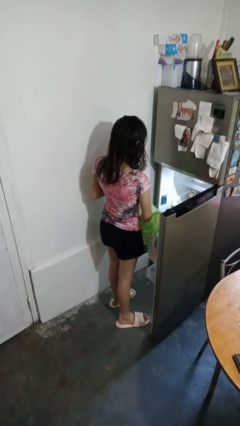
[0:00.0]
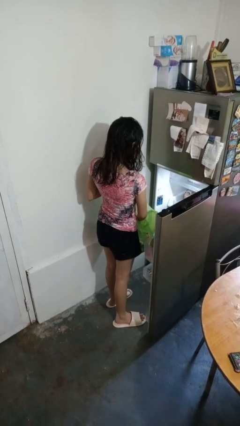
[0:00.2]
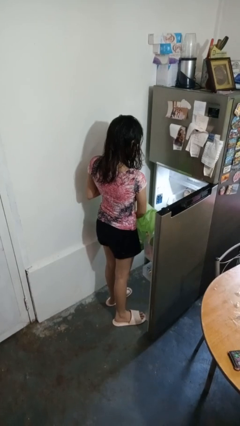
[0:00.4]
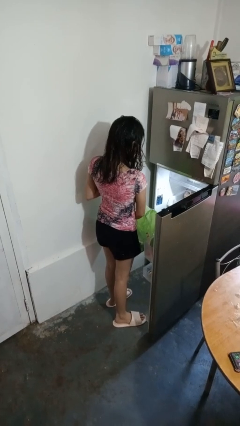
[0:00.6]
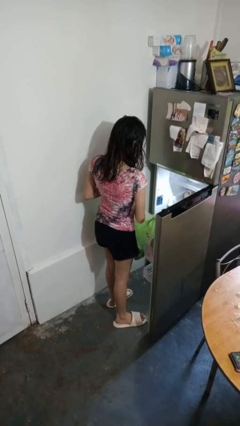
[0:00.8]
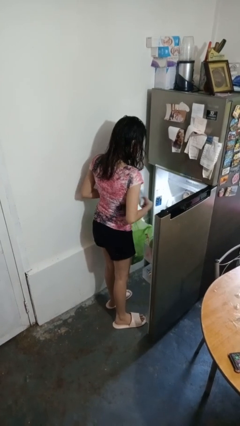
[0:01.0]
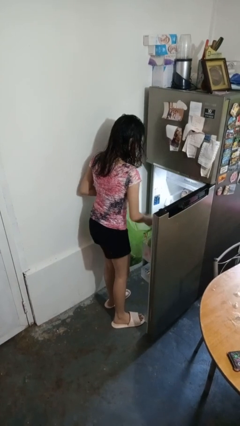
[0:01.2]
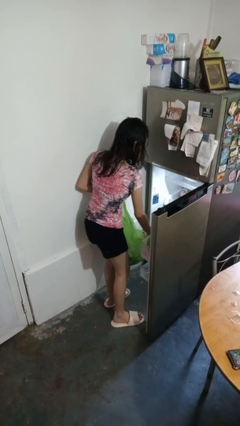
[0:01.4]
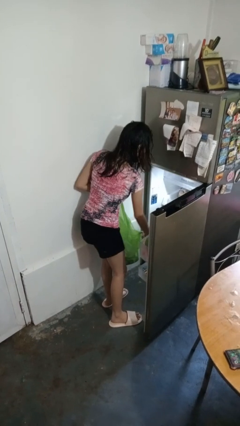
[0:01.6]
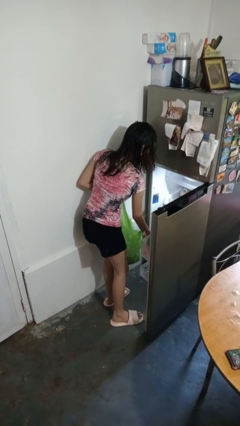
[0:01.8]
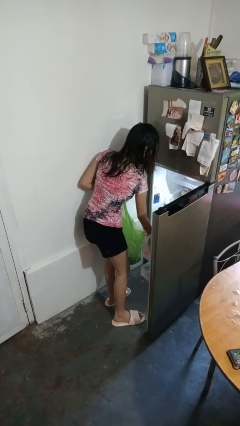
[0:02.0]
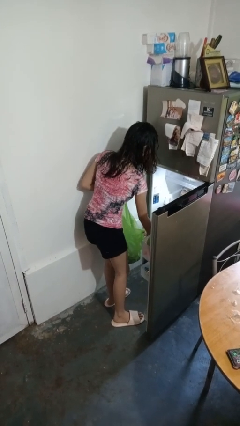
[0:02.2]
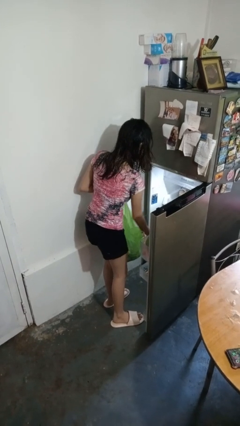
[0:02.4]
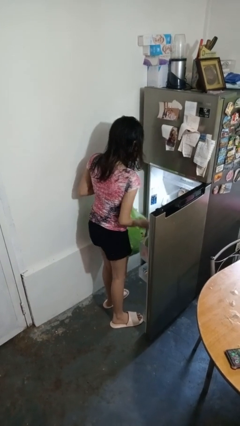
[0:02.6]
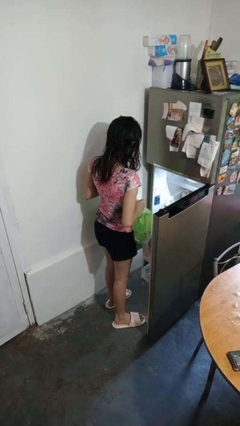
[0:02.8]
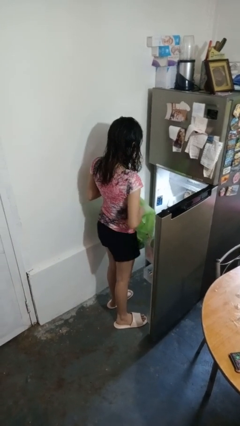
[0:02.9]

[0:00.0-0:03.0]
person loads groceries into refrigerator

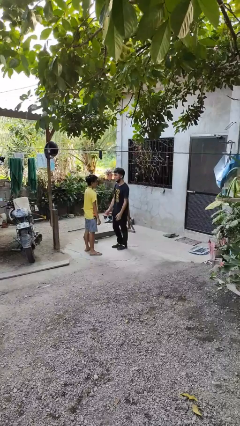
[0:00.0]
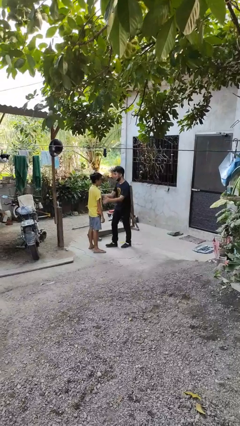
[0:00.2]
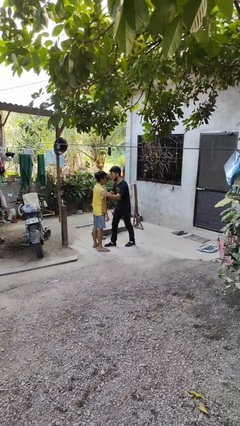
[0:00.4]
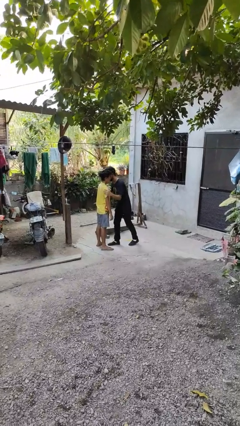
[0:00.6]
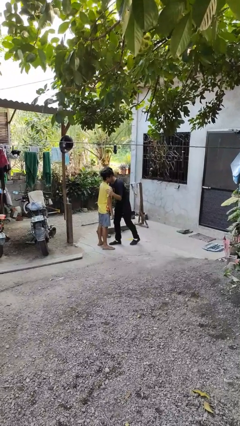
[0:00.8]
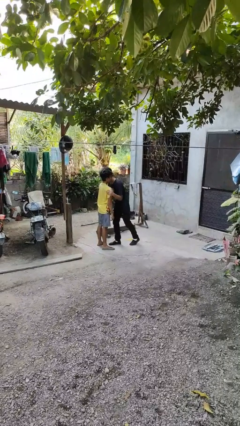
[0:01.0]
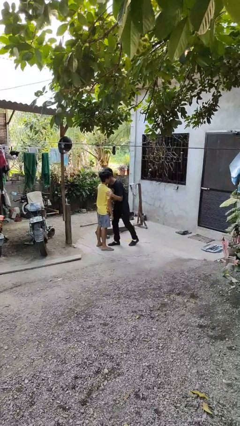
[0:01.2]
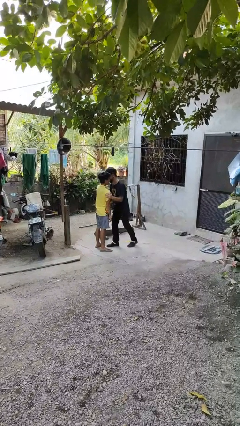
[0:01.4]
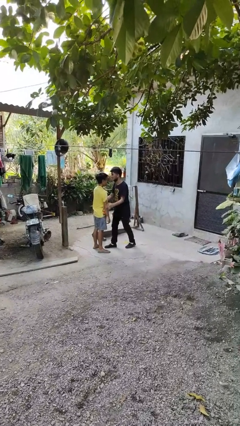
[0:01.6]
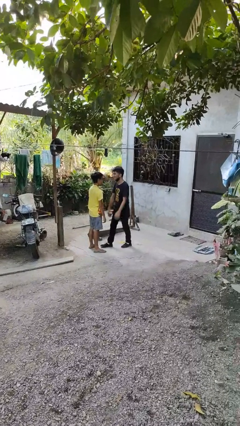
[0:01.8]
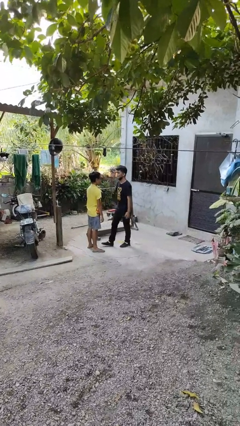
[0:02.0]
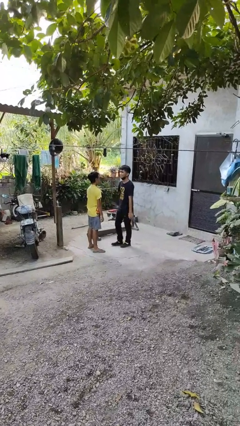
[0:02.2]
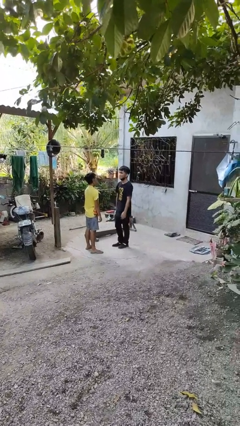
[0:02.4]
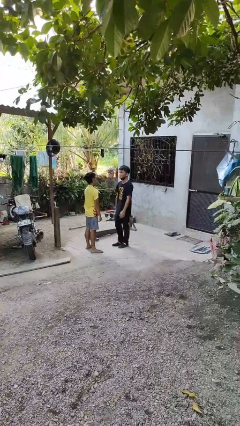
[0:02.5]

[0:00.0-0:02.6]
person kisses cheek of person

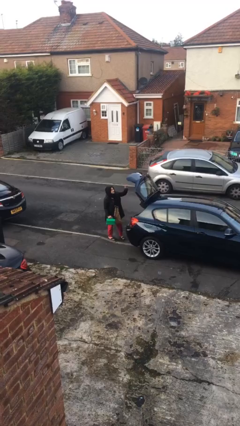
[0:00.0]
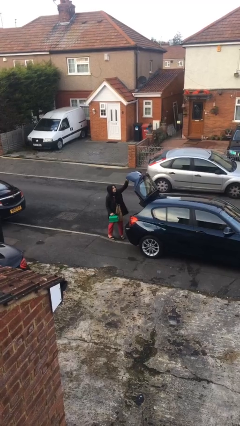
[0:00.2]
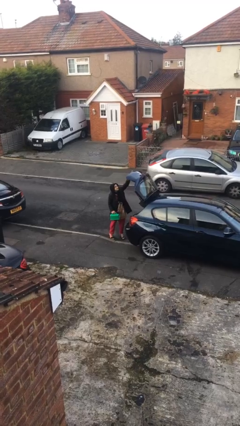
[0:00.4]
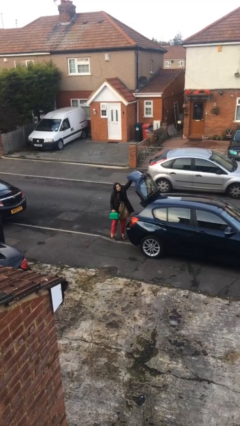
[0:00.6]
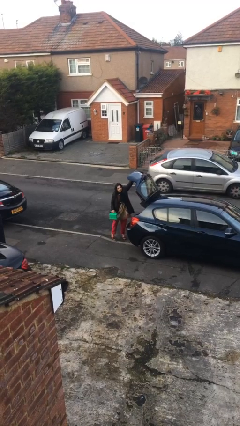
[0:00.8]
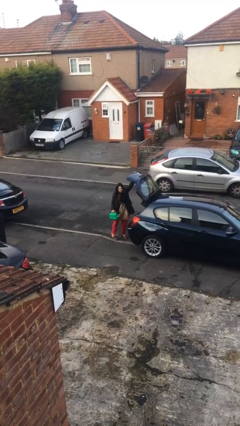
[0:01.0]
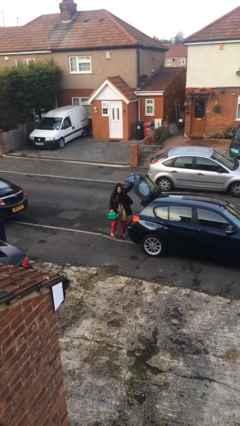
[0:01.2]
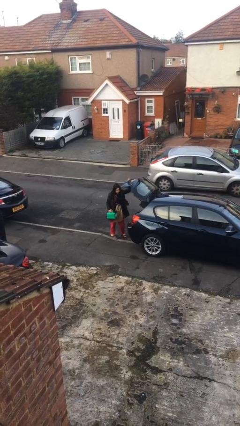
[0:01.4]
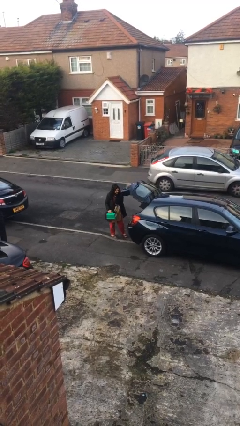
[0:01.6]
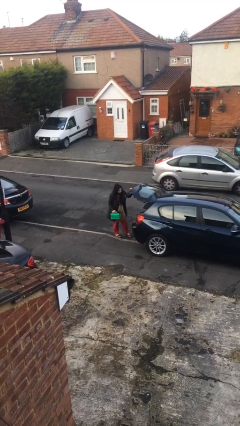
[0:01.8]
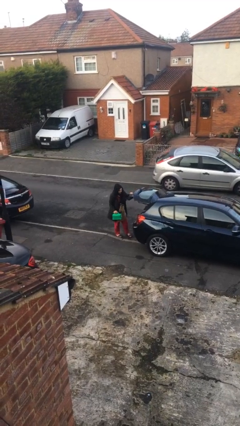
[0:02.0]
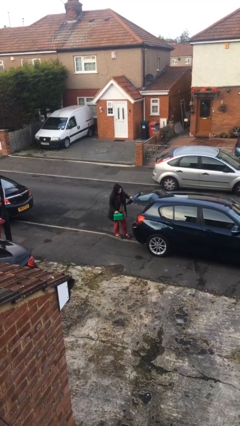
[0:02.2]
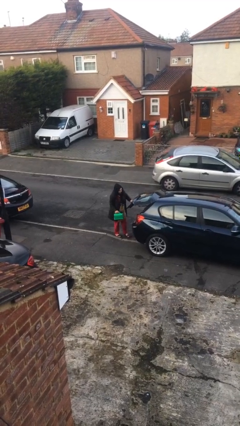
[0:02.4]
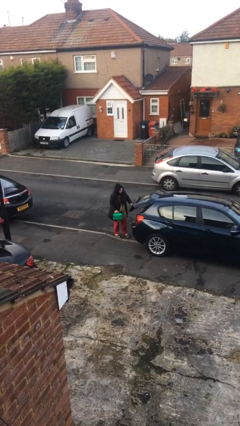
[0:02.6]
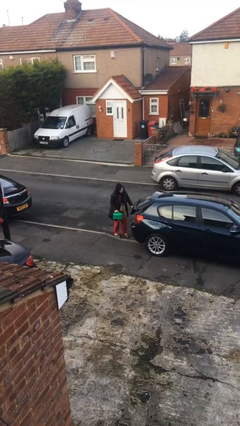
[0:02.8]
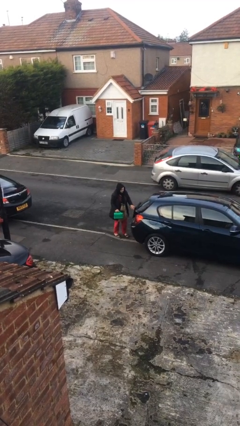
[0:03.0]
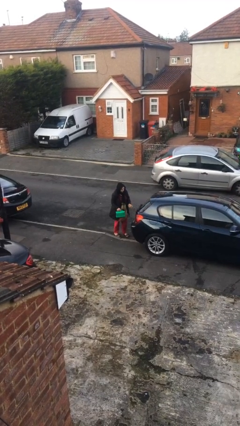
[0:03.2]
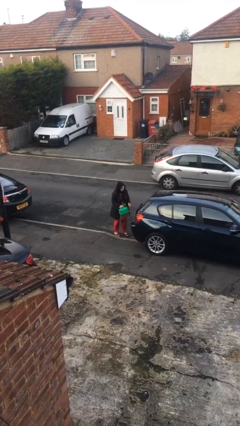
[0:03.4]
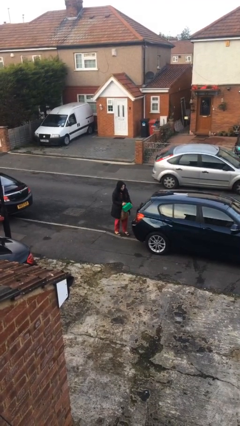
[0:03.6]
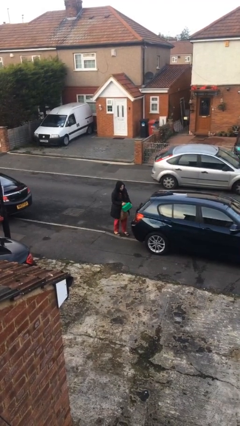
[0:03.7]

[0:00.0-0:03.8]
person closes car trunk

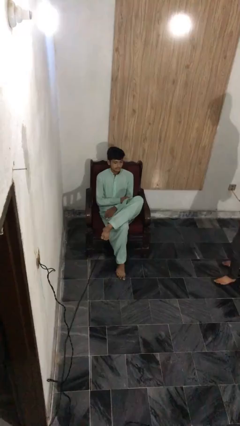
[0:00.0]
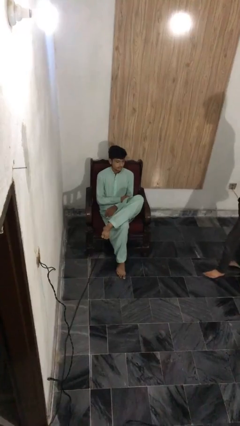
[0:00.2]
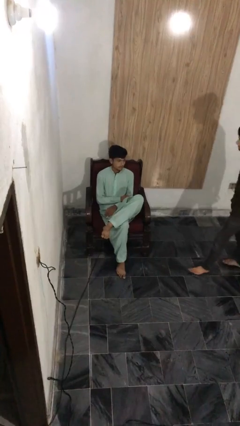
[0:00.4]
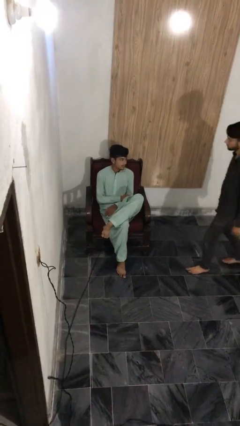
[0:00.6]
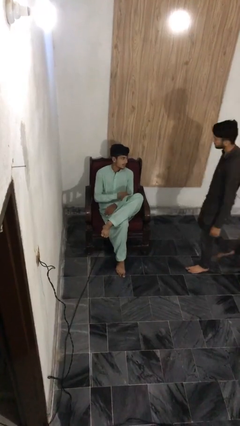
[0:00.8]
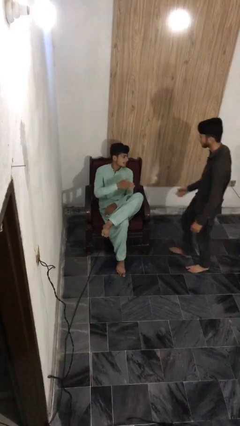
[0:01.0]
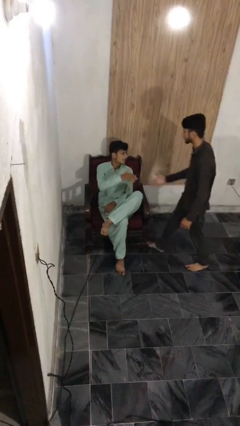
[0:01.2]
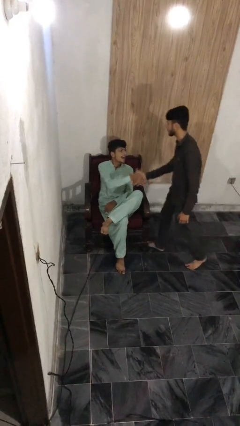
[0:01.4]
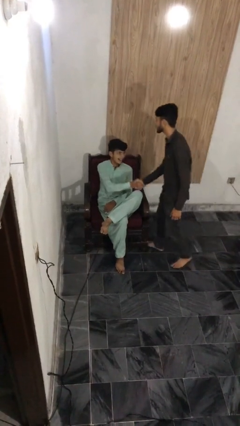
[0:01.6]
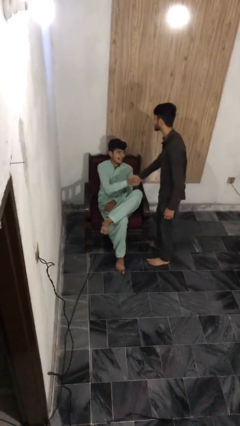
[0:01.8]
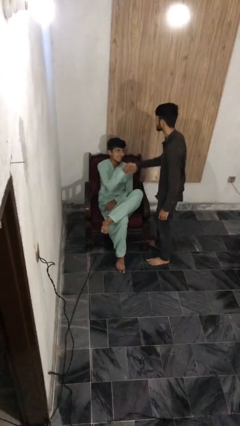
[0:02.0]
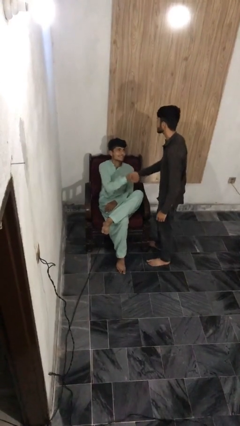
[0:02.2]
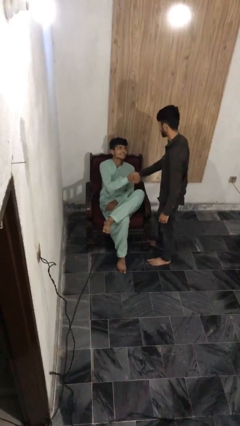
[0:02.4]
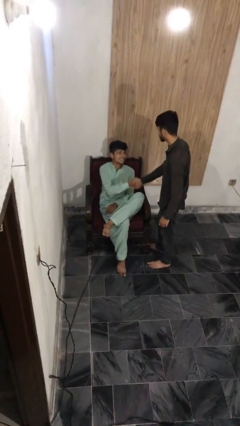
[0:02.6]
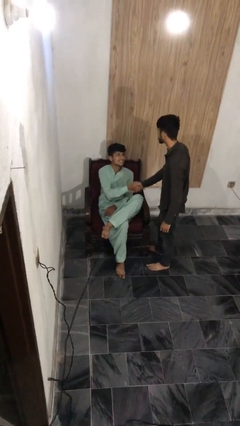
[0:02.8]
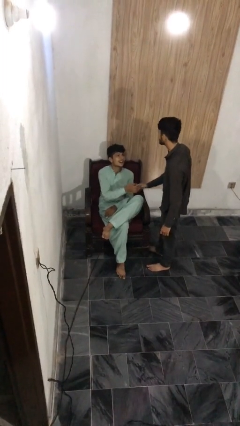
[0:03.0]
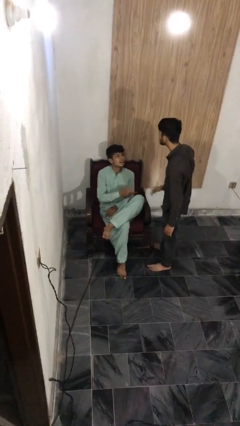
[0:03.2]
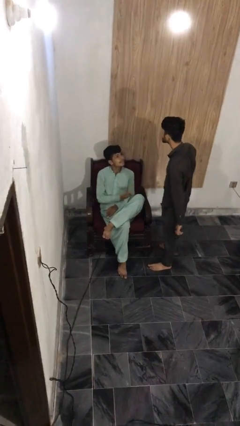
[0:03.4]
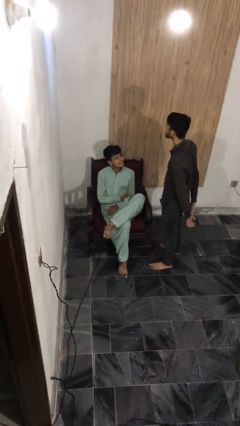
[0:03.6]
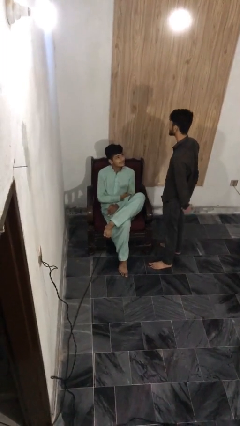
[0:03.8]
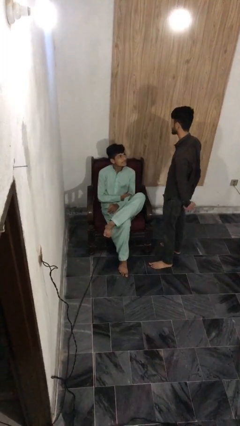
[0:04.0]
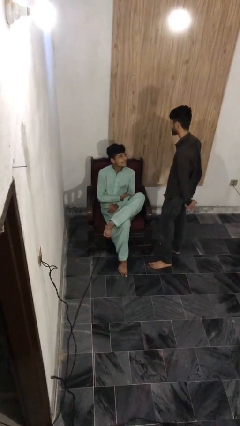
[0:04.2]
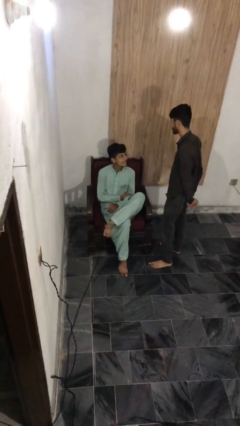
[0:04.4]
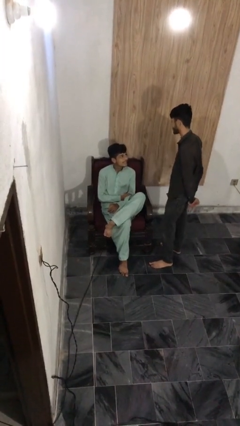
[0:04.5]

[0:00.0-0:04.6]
person shakes hand

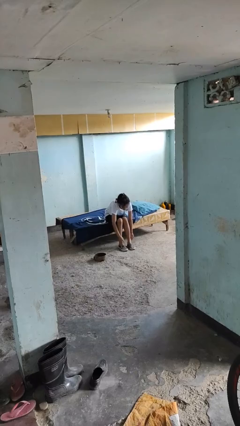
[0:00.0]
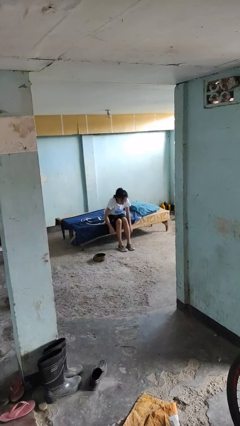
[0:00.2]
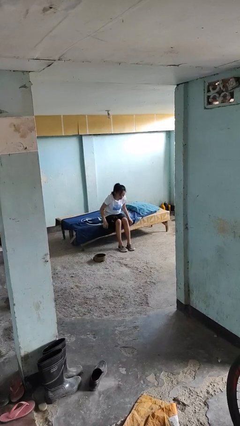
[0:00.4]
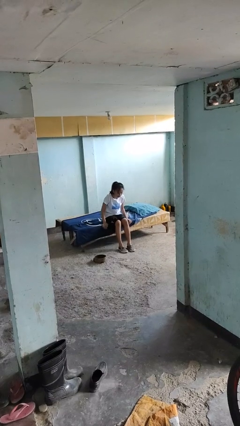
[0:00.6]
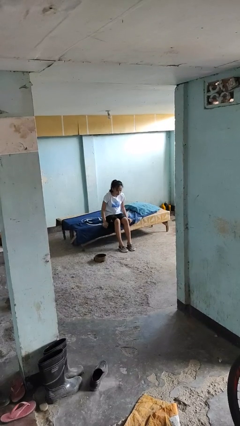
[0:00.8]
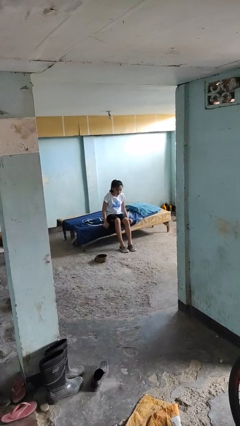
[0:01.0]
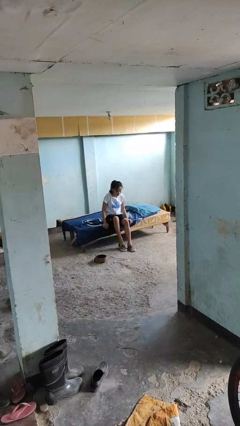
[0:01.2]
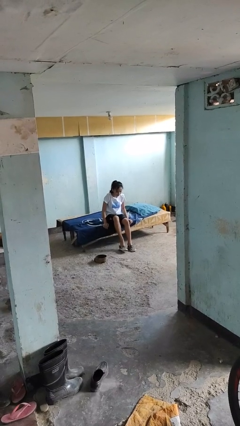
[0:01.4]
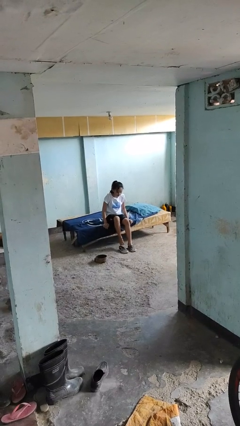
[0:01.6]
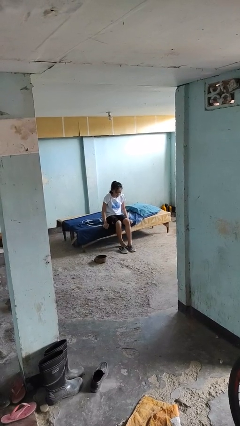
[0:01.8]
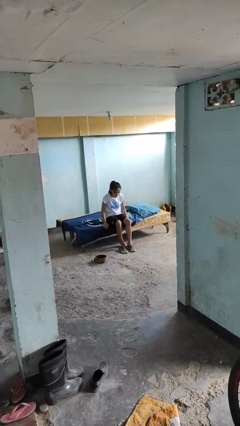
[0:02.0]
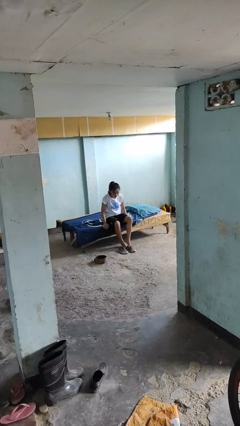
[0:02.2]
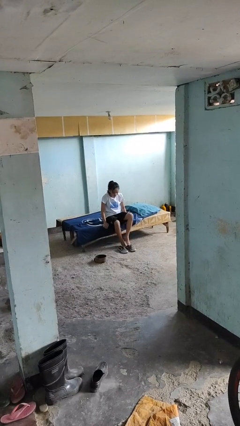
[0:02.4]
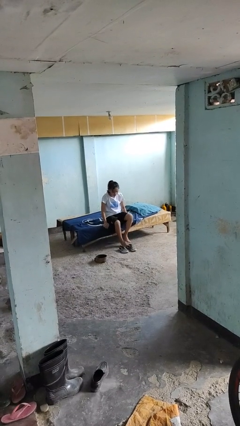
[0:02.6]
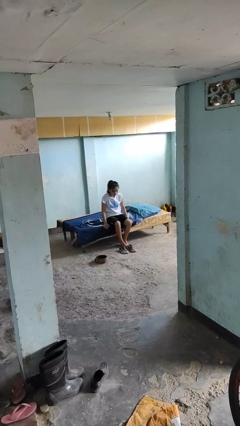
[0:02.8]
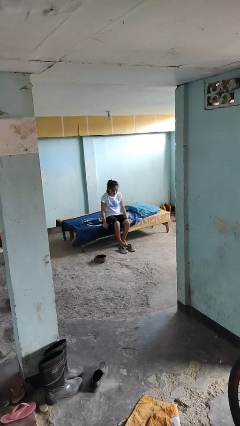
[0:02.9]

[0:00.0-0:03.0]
person takes off shoes

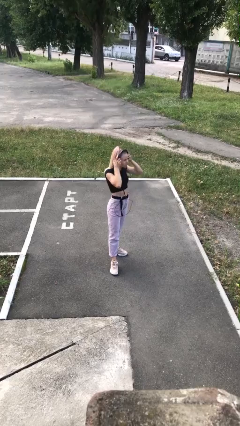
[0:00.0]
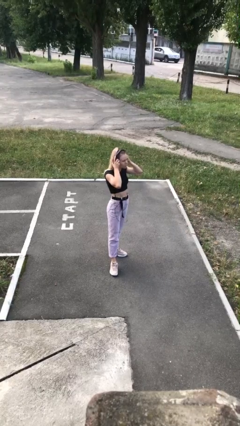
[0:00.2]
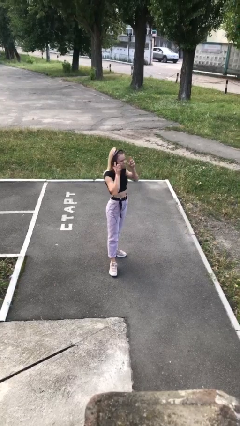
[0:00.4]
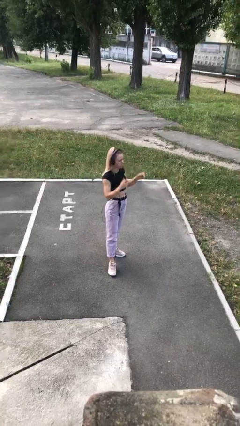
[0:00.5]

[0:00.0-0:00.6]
person puts on headphones
